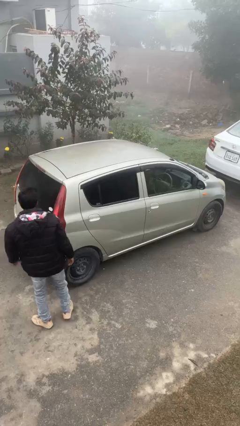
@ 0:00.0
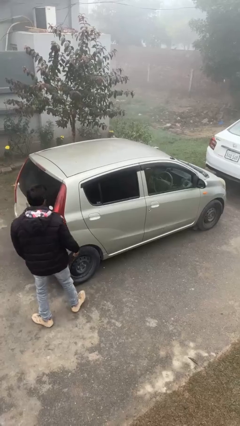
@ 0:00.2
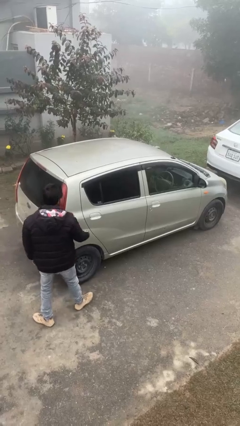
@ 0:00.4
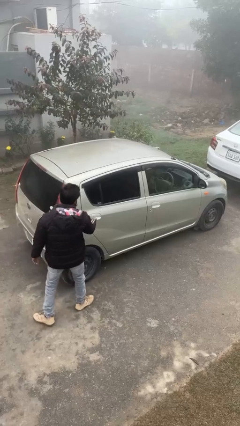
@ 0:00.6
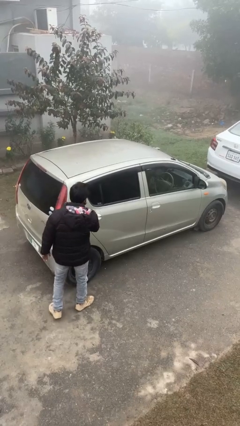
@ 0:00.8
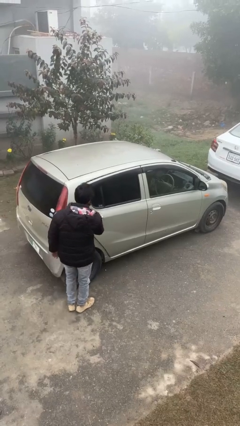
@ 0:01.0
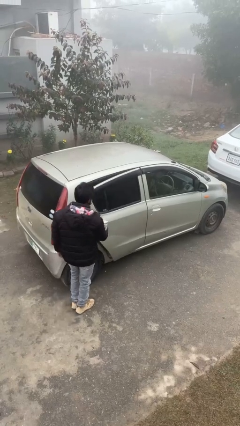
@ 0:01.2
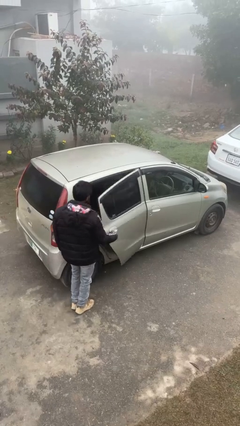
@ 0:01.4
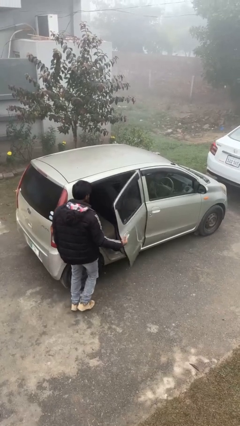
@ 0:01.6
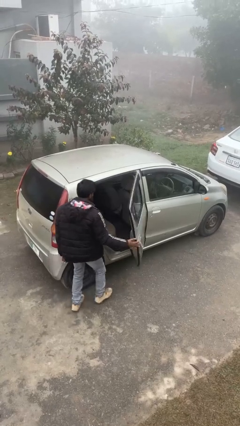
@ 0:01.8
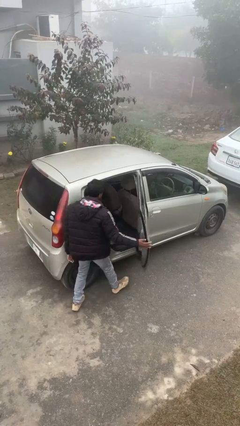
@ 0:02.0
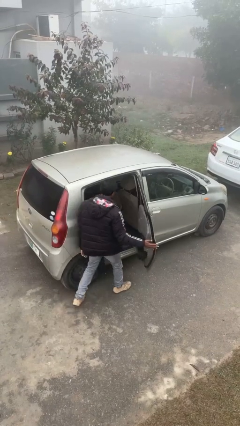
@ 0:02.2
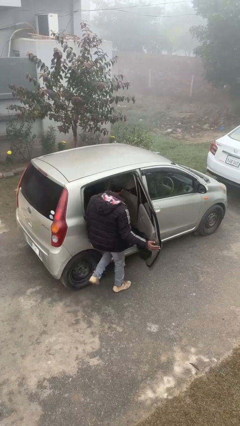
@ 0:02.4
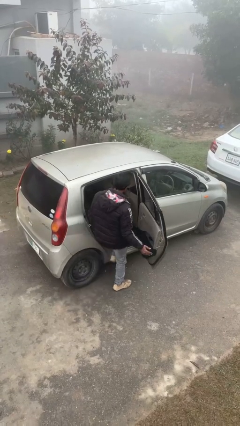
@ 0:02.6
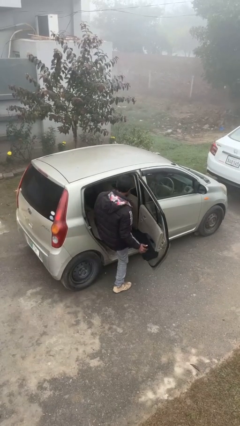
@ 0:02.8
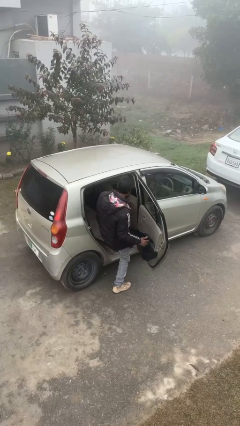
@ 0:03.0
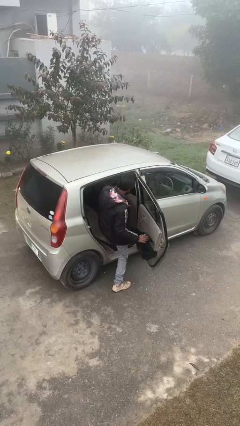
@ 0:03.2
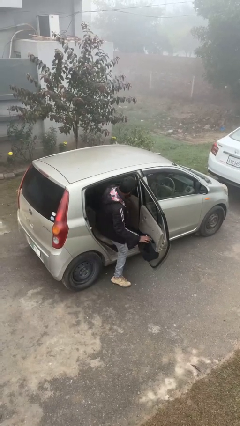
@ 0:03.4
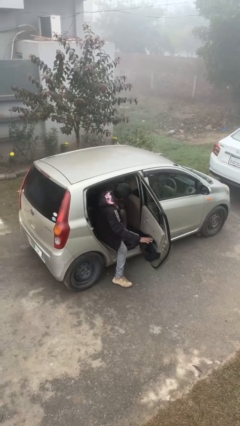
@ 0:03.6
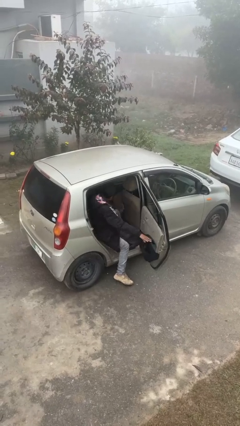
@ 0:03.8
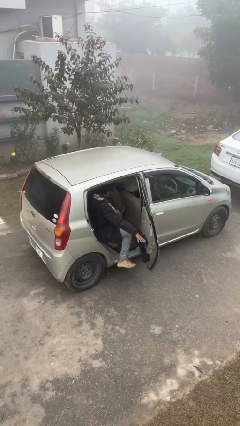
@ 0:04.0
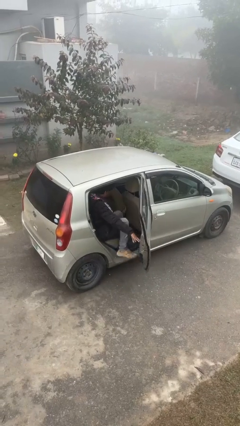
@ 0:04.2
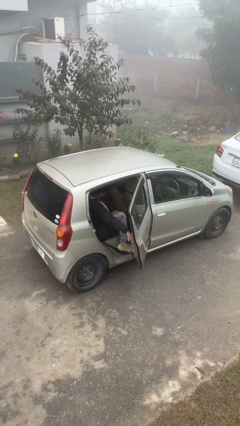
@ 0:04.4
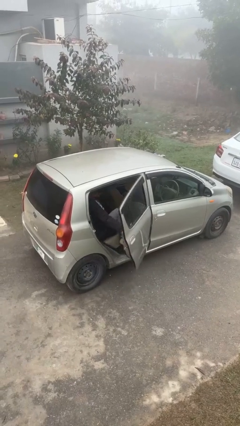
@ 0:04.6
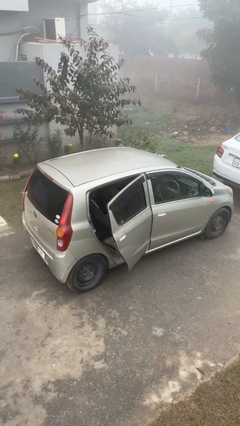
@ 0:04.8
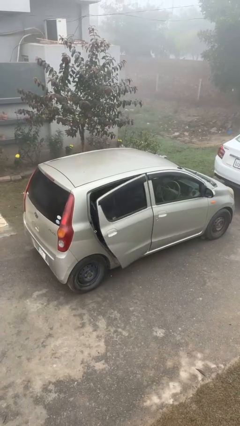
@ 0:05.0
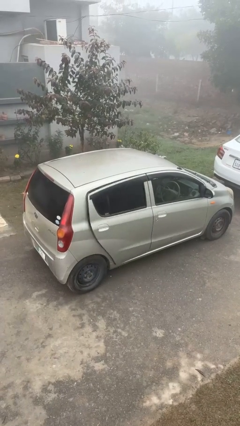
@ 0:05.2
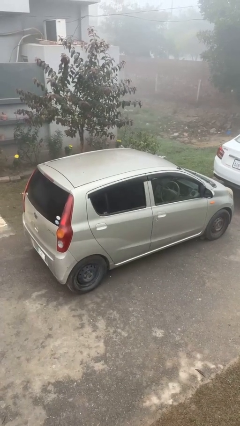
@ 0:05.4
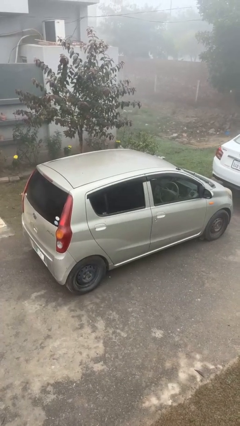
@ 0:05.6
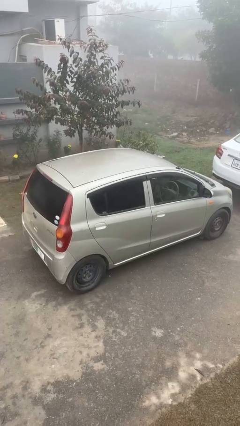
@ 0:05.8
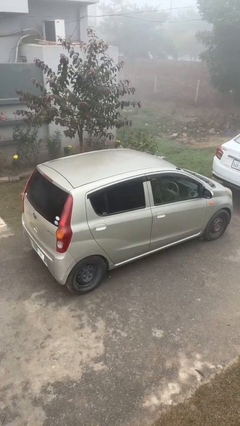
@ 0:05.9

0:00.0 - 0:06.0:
car picks up person

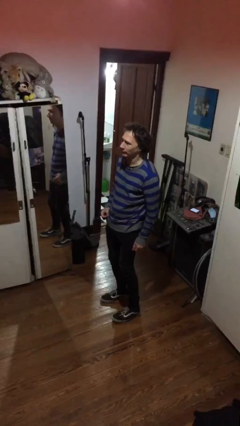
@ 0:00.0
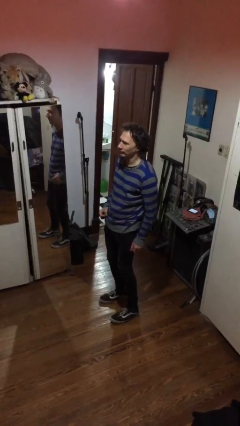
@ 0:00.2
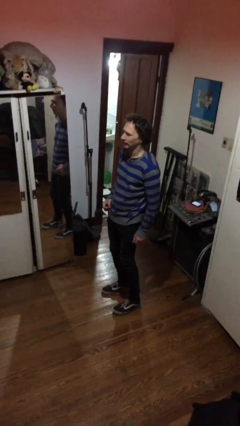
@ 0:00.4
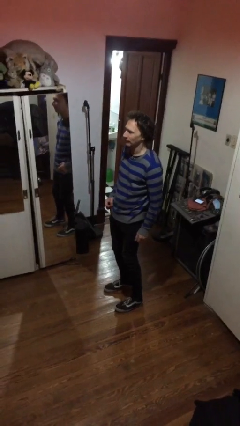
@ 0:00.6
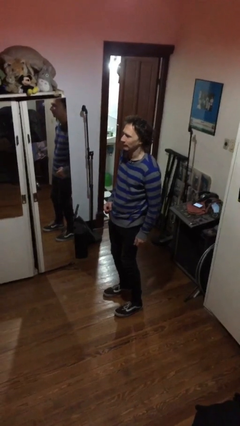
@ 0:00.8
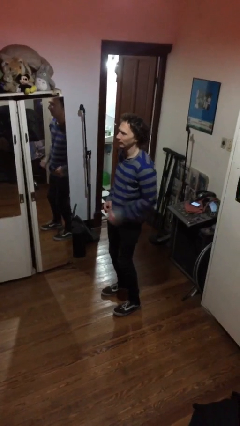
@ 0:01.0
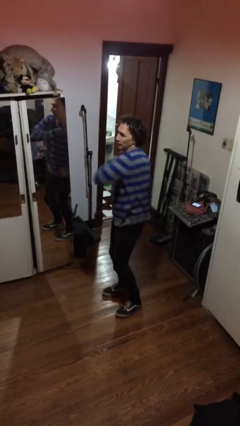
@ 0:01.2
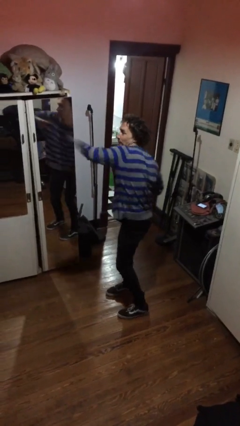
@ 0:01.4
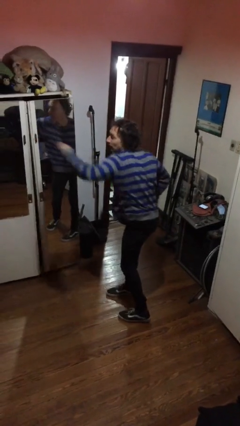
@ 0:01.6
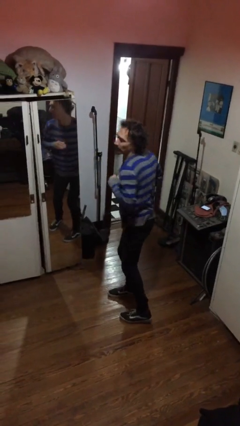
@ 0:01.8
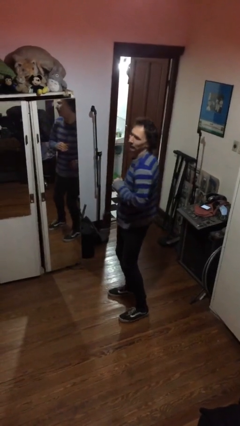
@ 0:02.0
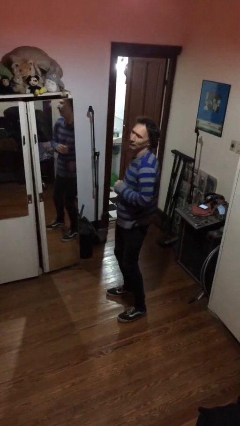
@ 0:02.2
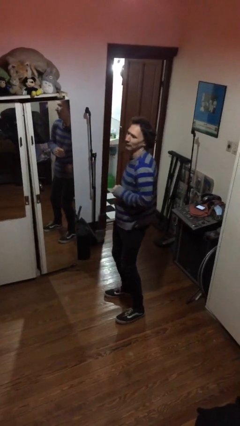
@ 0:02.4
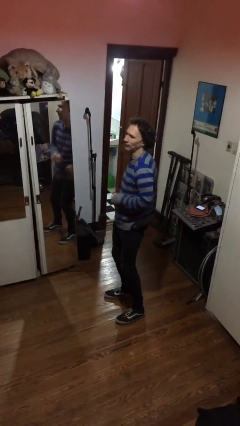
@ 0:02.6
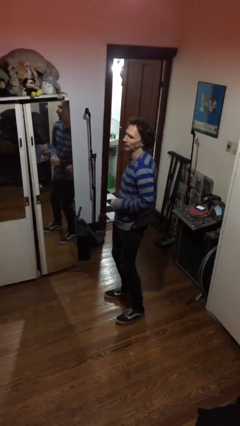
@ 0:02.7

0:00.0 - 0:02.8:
person karate chop

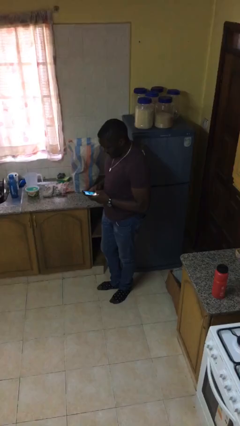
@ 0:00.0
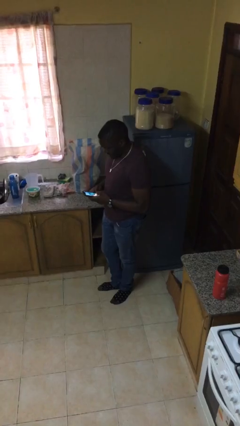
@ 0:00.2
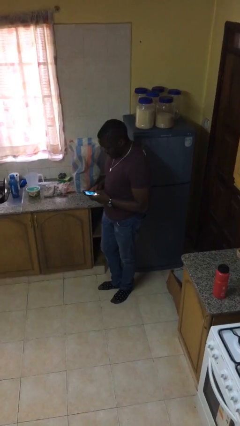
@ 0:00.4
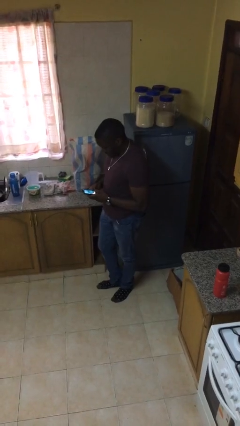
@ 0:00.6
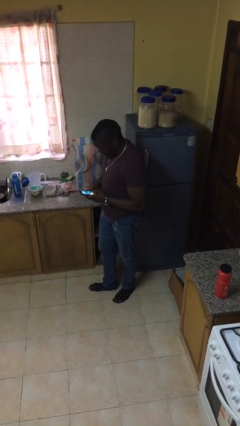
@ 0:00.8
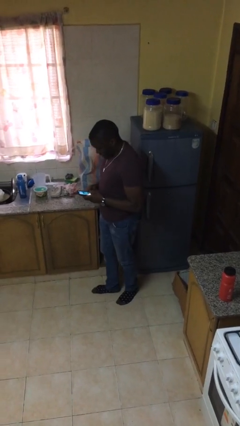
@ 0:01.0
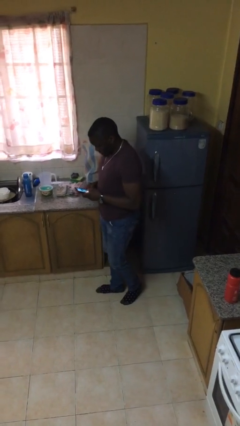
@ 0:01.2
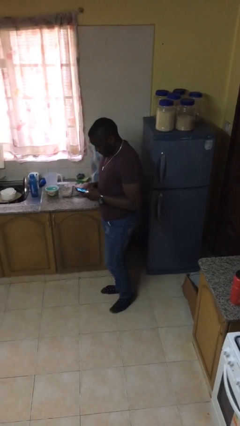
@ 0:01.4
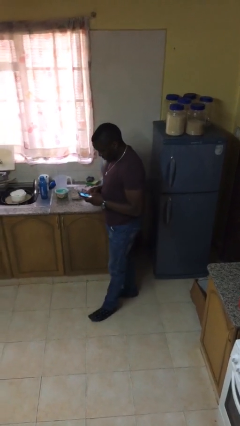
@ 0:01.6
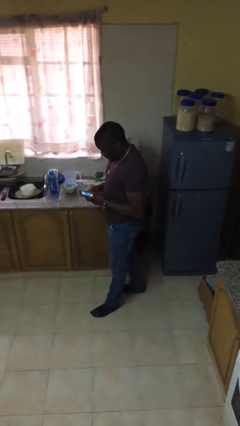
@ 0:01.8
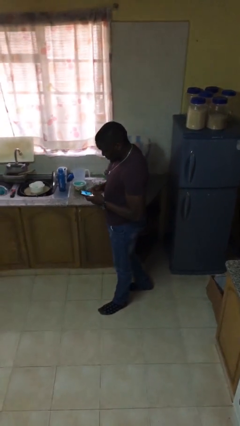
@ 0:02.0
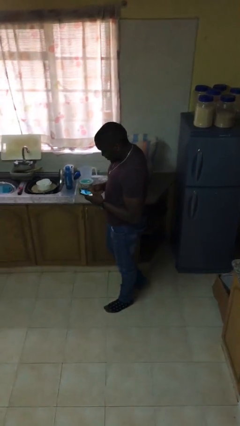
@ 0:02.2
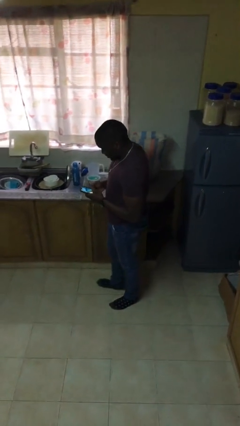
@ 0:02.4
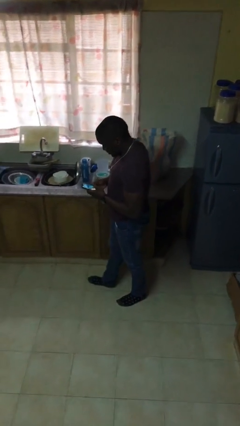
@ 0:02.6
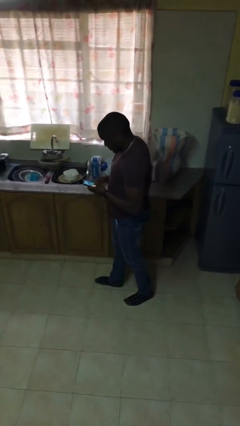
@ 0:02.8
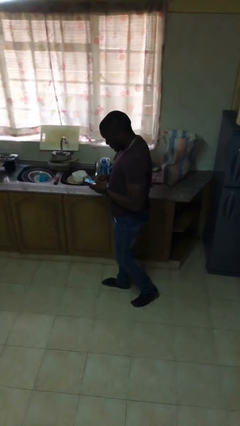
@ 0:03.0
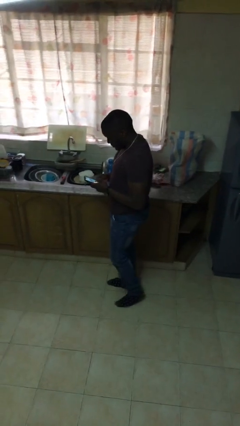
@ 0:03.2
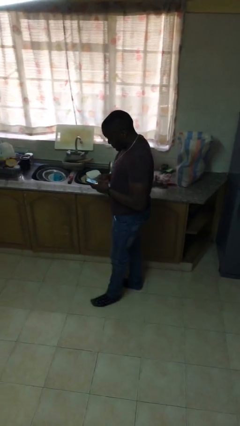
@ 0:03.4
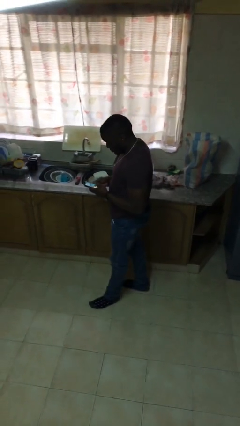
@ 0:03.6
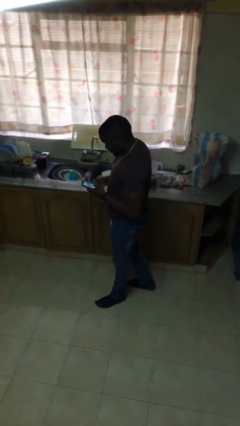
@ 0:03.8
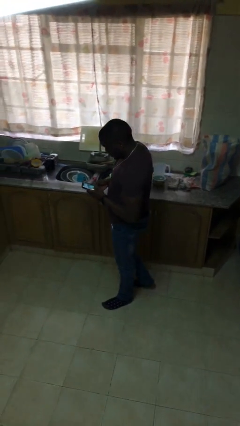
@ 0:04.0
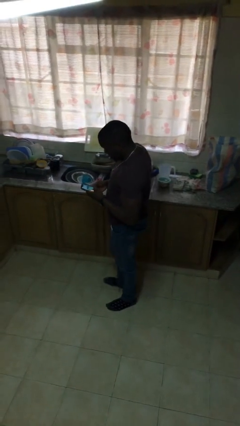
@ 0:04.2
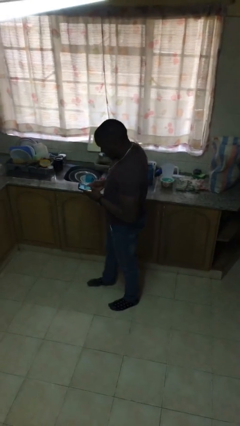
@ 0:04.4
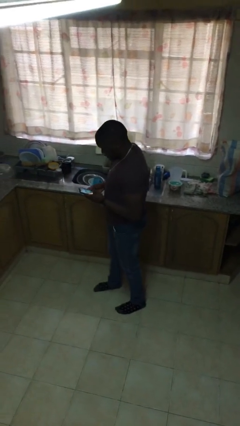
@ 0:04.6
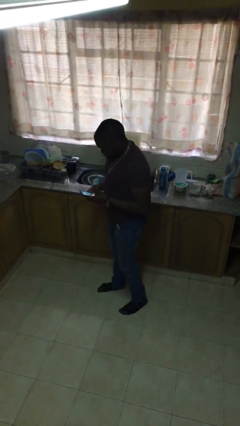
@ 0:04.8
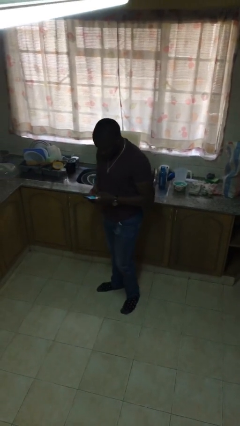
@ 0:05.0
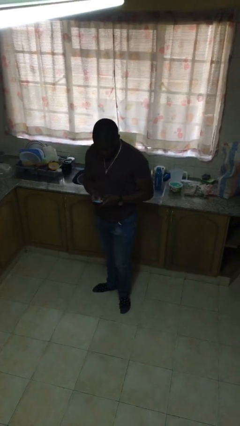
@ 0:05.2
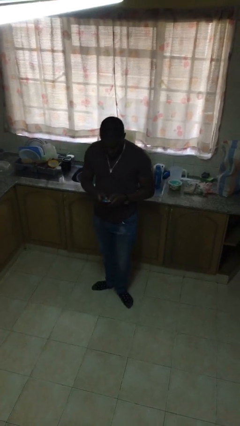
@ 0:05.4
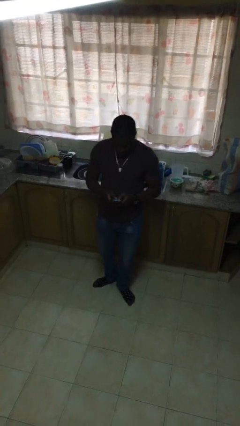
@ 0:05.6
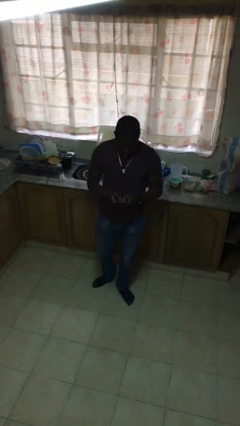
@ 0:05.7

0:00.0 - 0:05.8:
person texts on phone

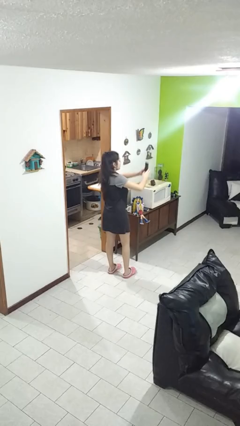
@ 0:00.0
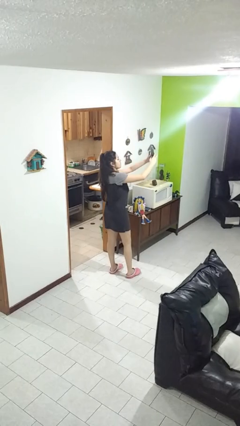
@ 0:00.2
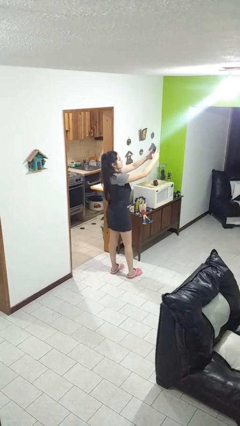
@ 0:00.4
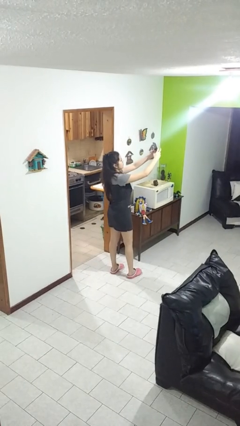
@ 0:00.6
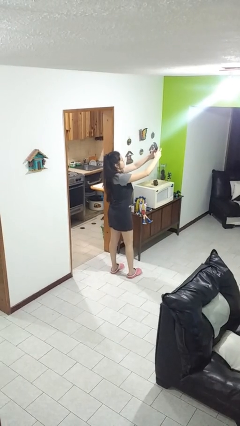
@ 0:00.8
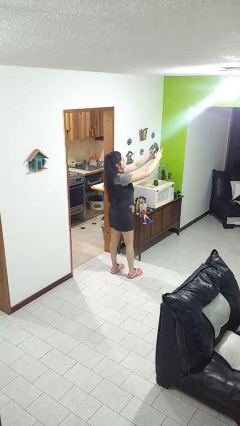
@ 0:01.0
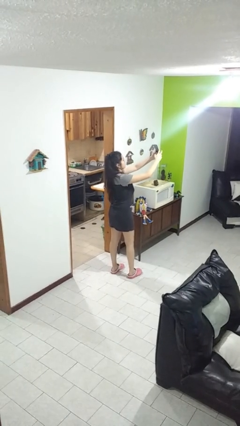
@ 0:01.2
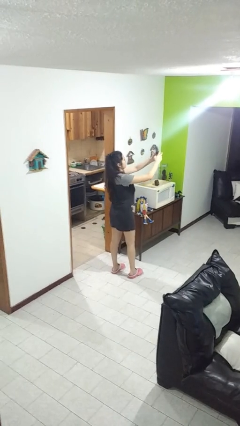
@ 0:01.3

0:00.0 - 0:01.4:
person takes selfie

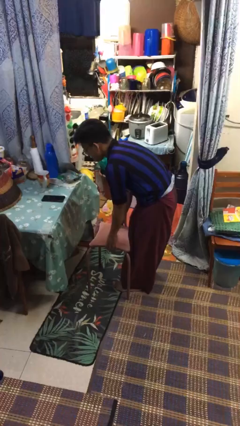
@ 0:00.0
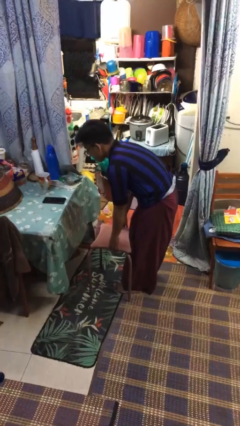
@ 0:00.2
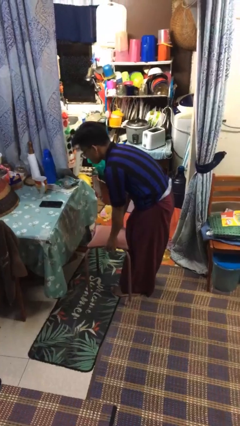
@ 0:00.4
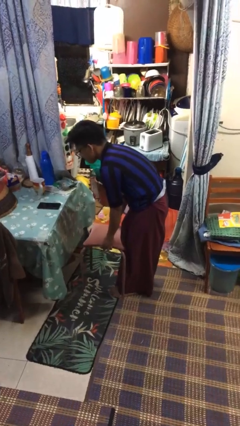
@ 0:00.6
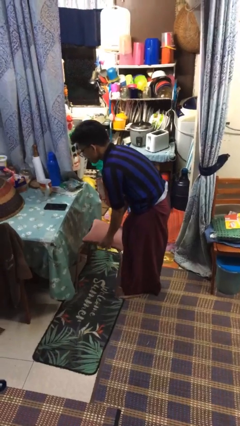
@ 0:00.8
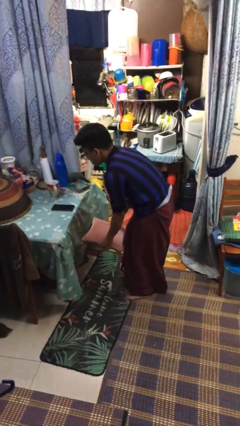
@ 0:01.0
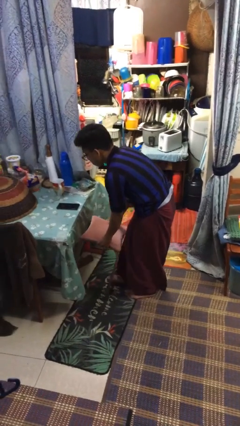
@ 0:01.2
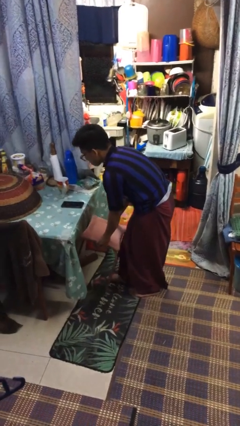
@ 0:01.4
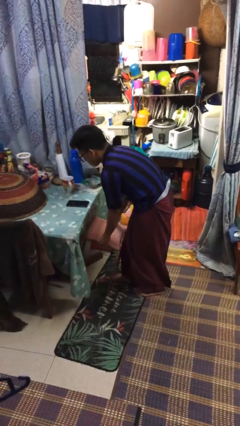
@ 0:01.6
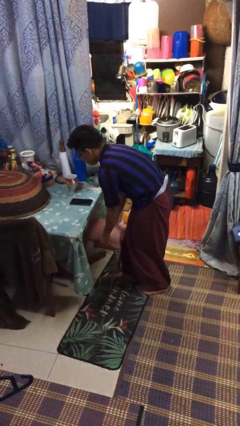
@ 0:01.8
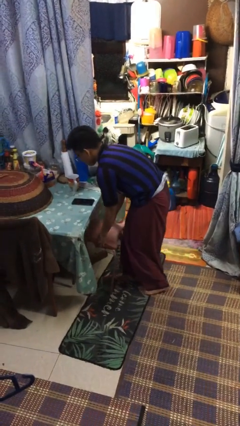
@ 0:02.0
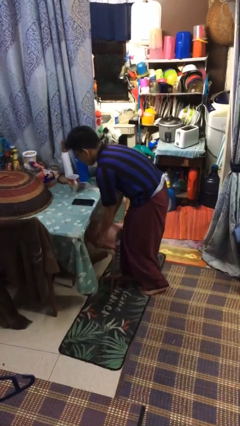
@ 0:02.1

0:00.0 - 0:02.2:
person pushes in chair
